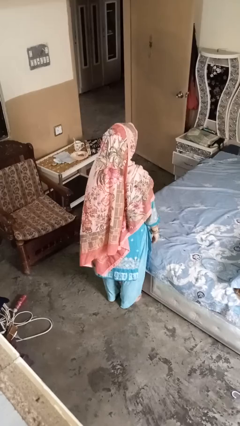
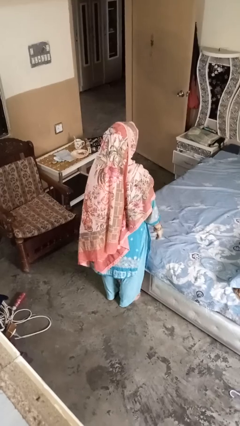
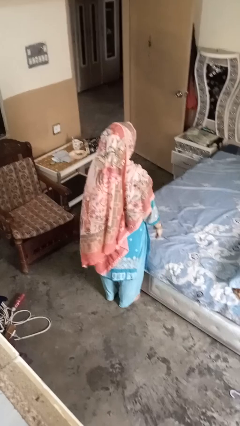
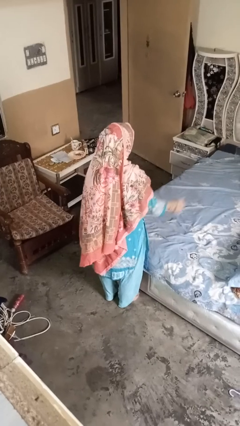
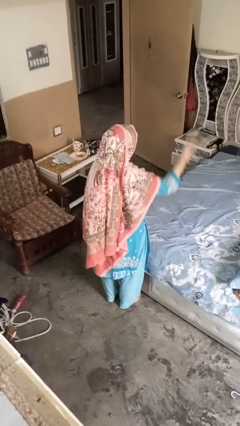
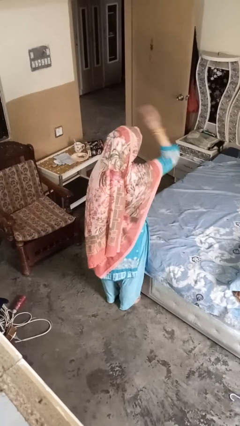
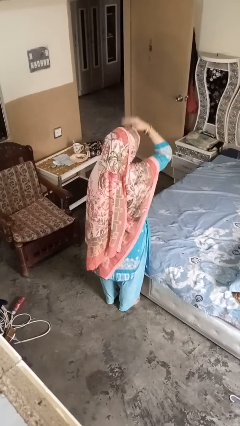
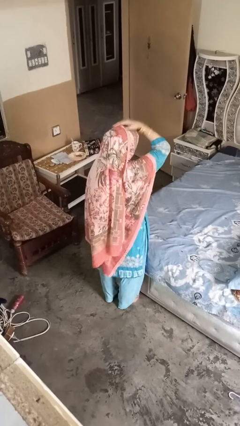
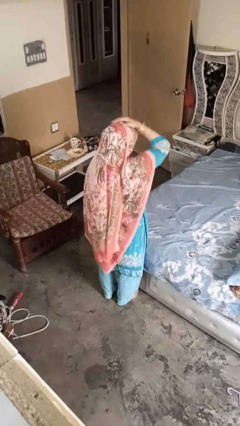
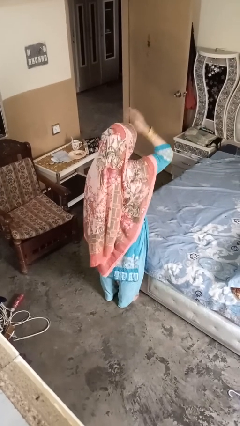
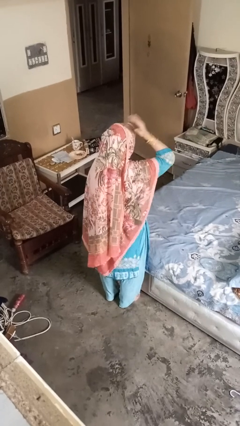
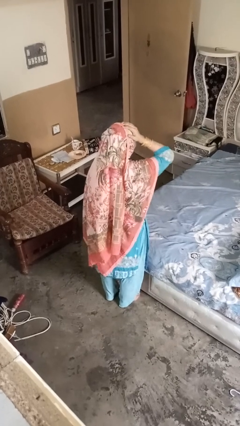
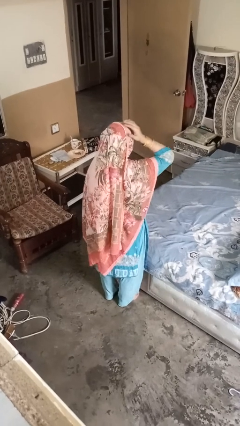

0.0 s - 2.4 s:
person pats head

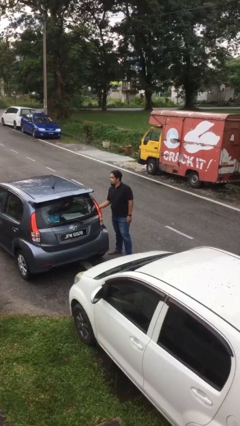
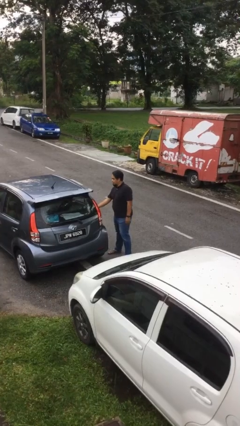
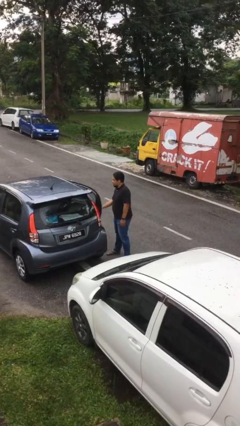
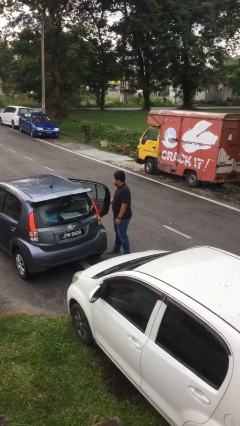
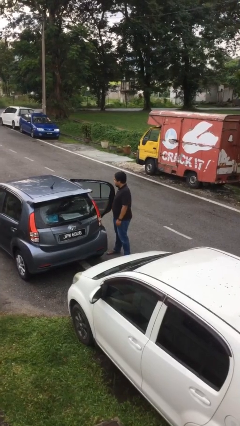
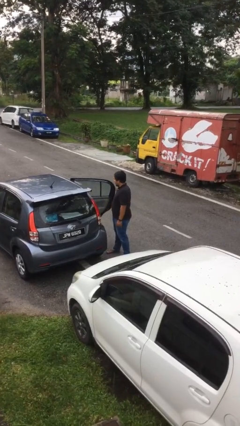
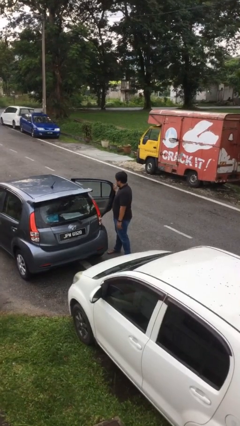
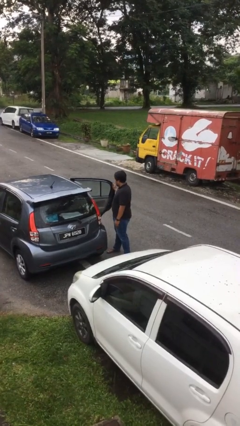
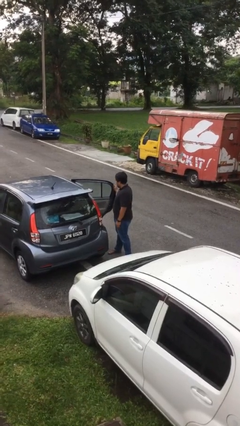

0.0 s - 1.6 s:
person opens car door

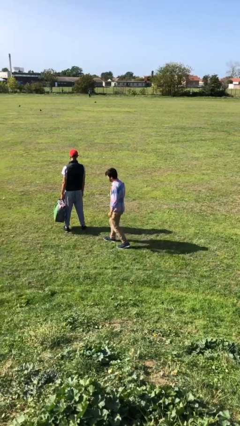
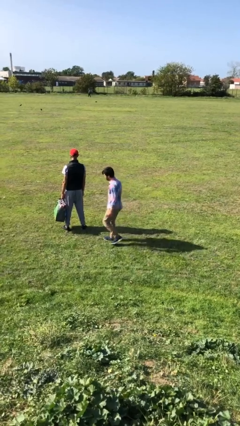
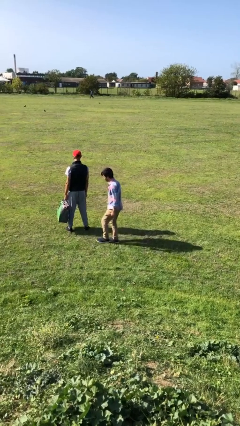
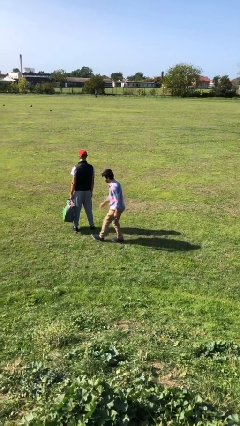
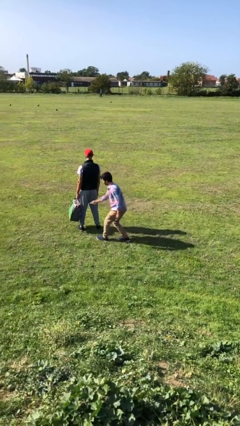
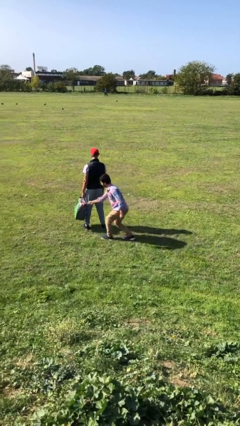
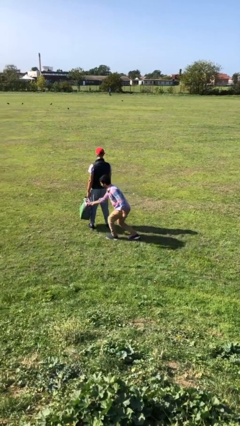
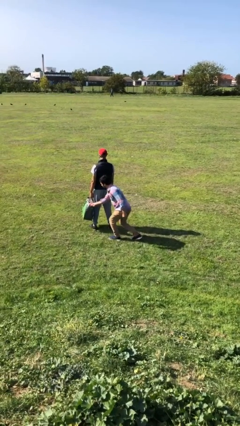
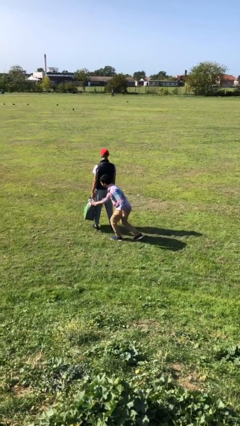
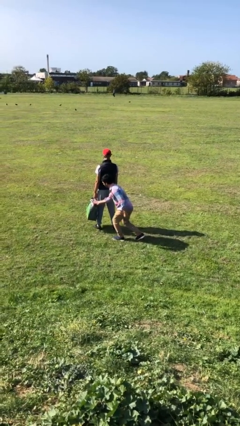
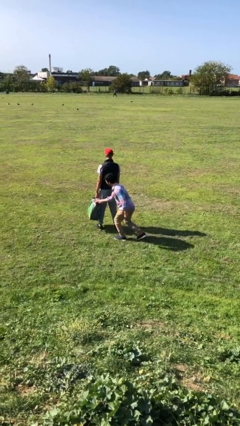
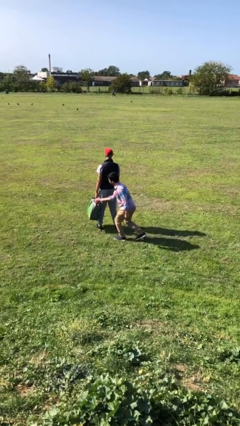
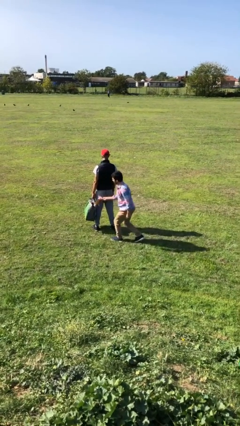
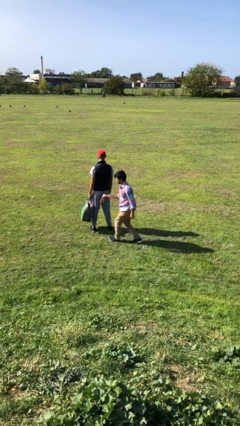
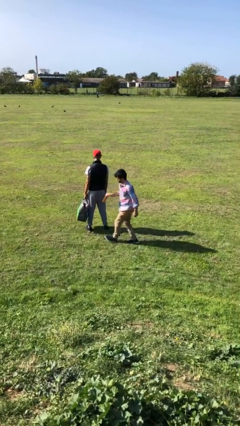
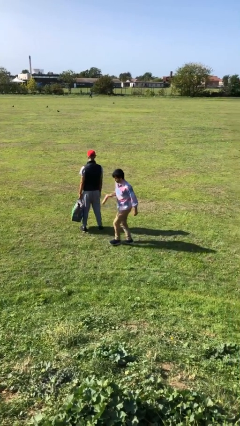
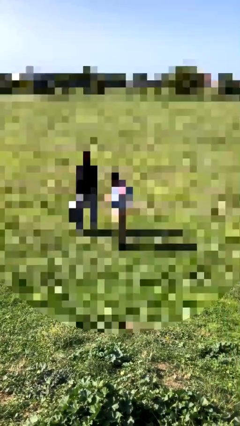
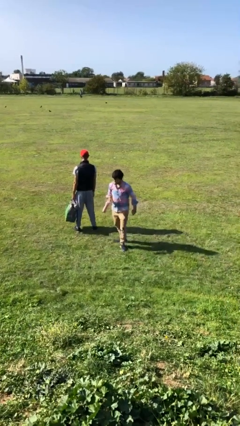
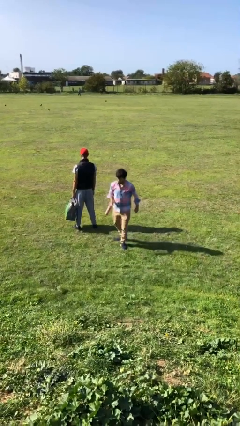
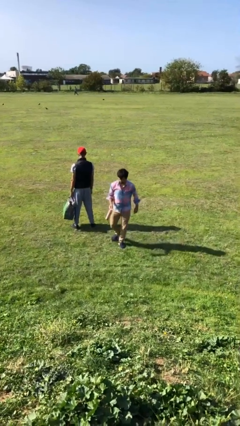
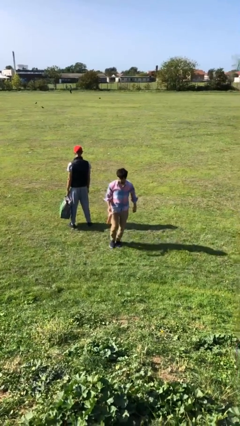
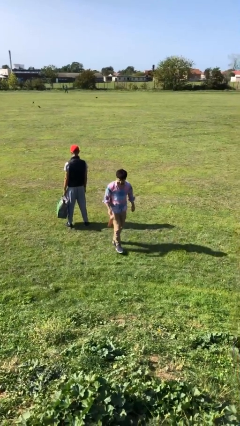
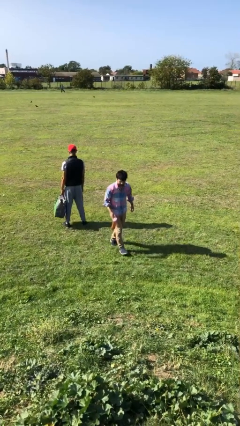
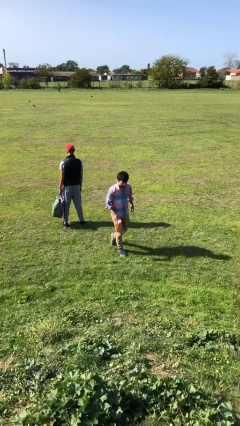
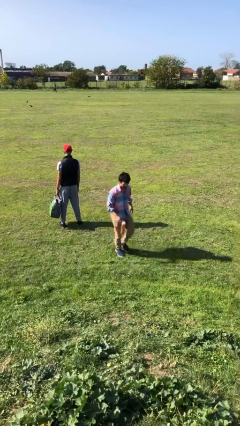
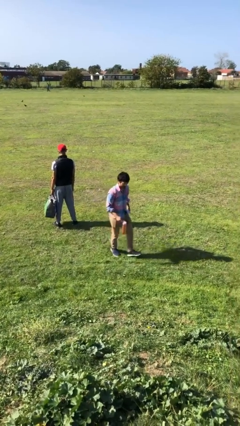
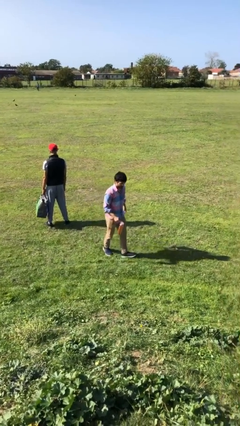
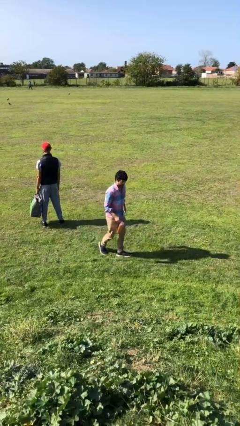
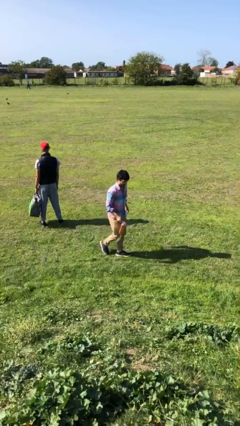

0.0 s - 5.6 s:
person steals object from person

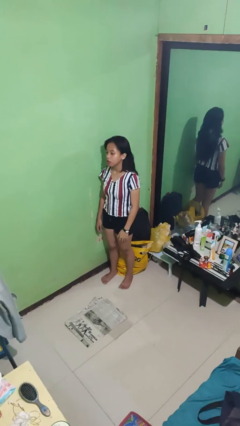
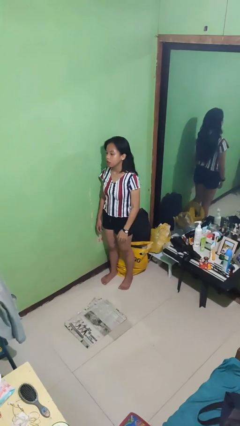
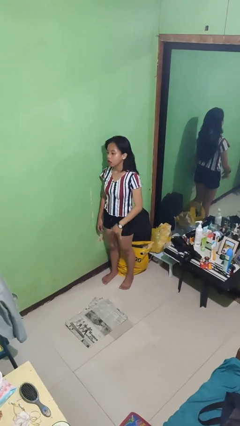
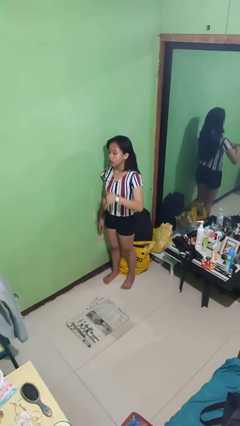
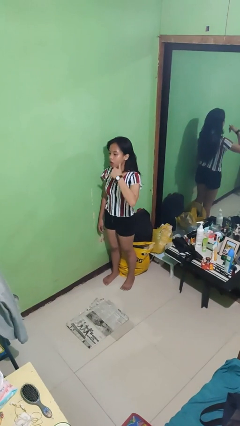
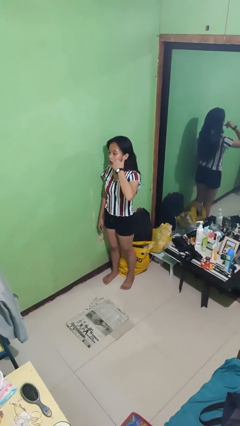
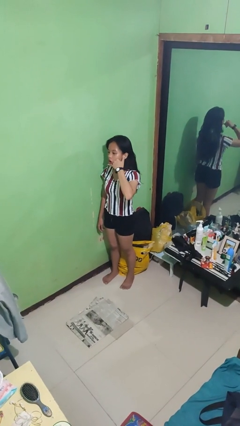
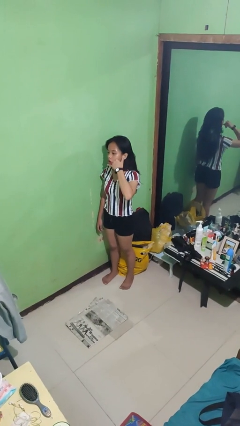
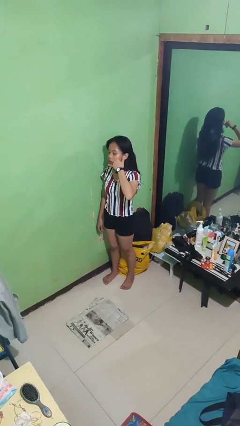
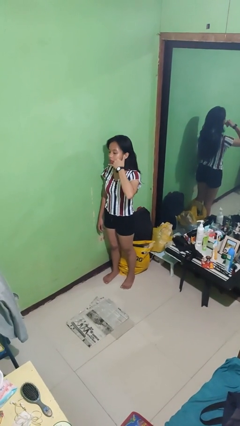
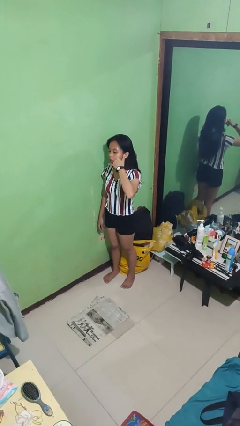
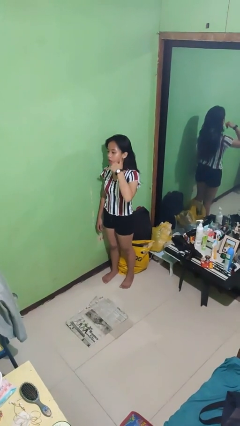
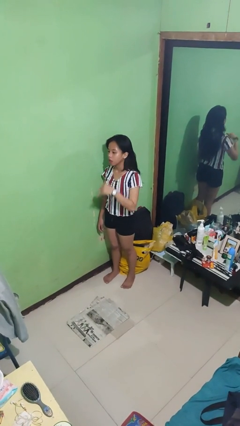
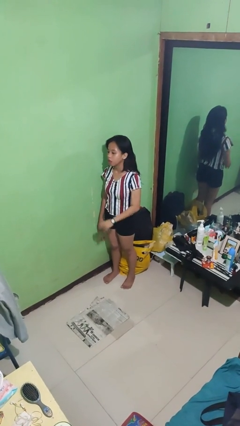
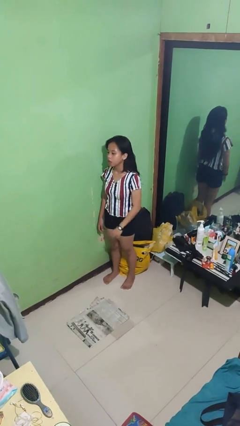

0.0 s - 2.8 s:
person gestures call me

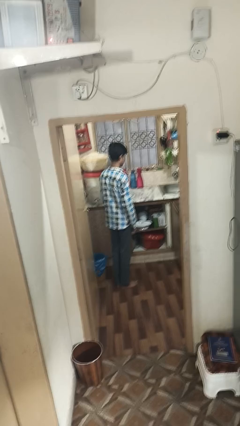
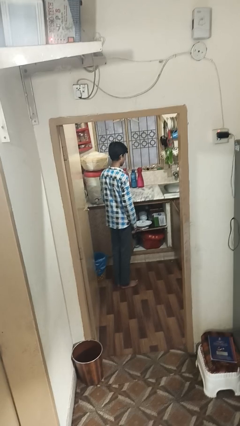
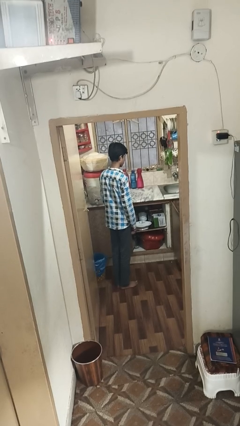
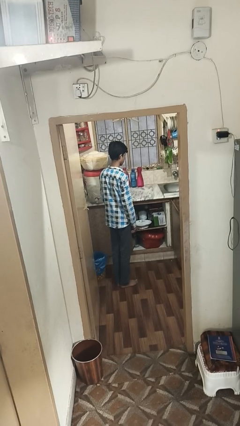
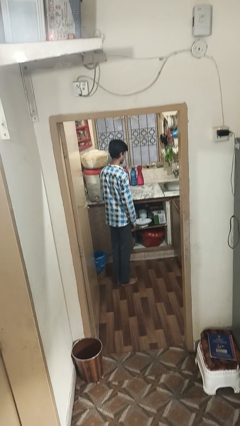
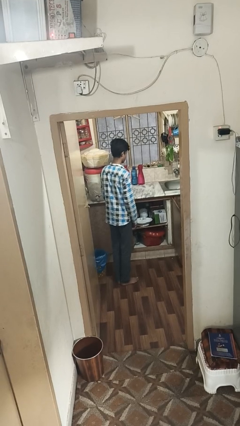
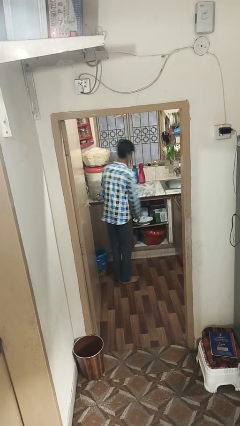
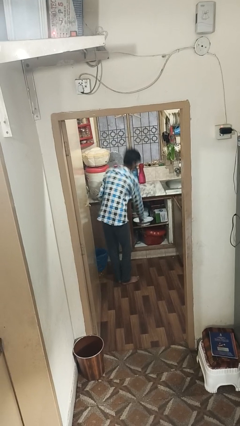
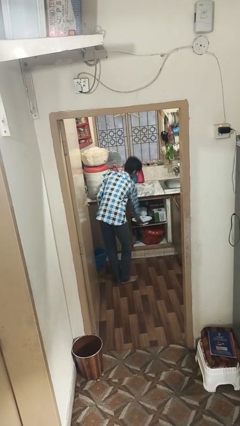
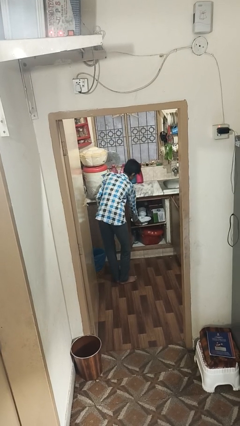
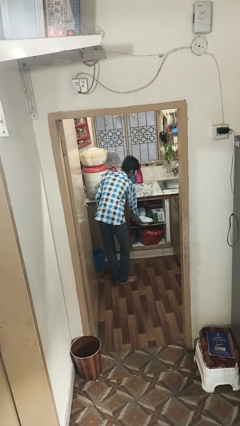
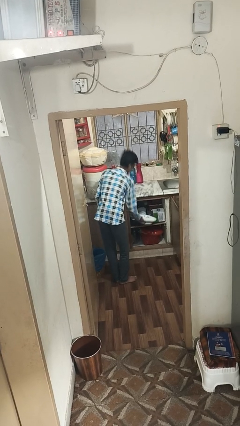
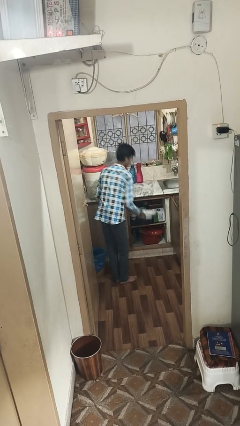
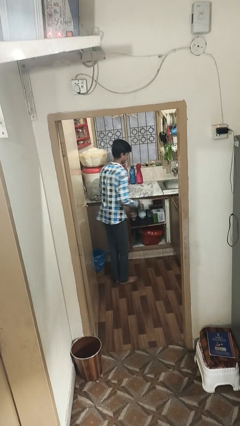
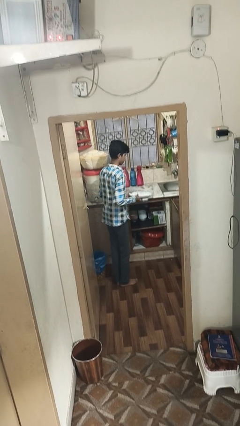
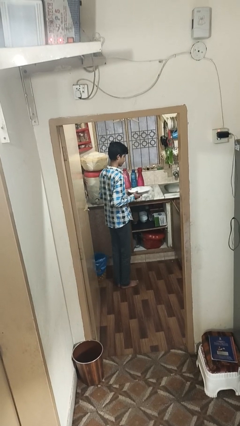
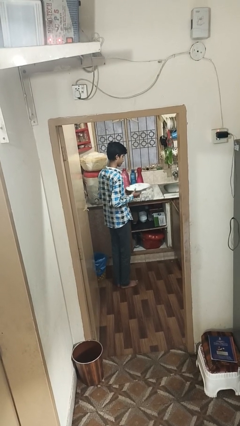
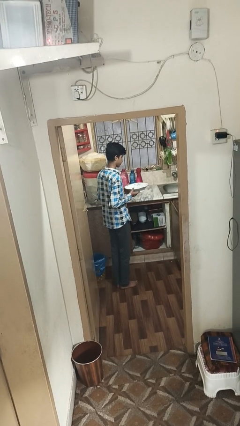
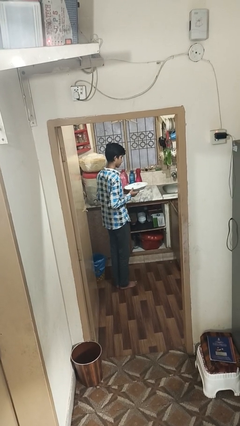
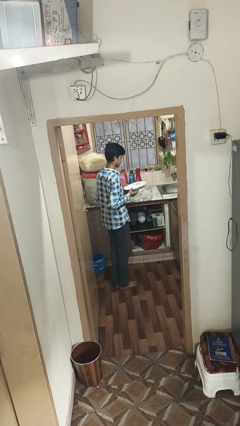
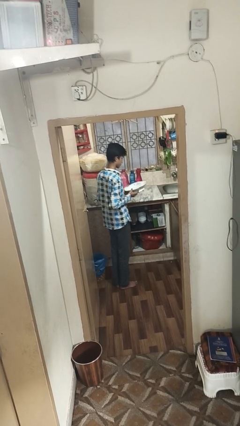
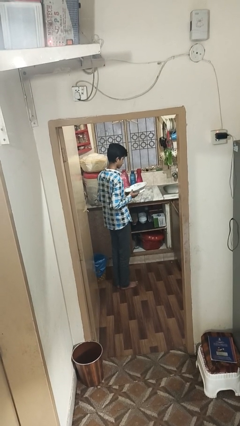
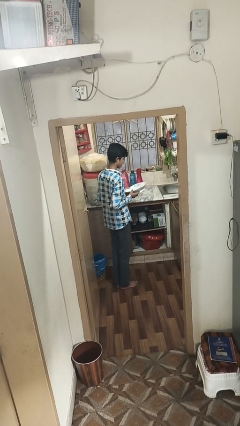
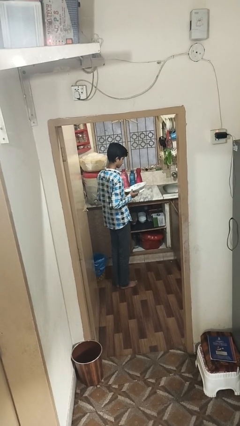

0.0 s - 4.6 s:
person picks up object from cabinet
